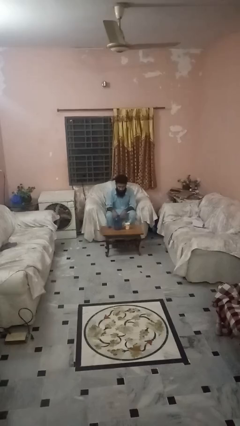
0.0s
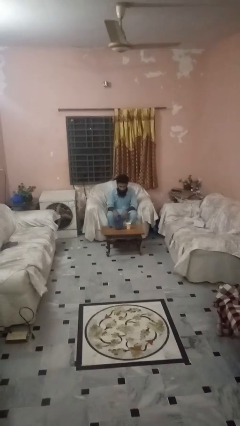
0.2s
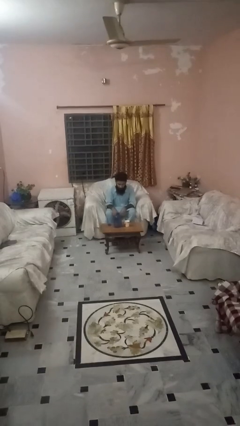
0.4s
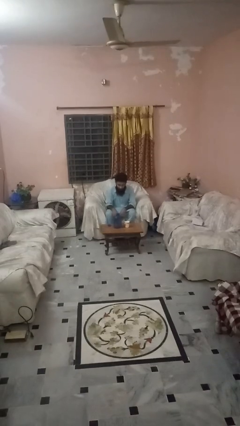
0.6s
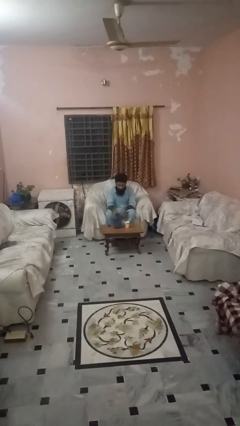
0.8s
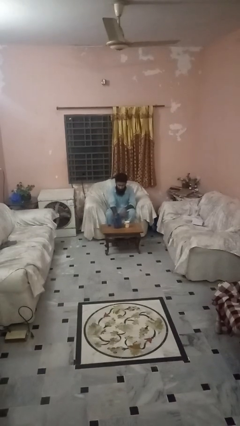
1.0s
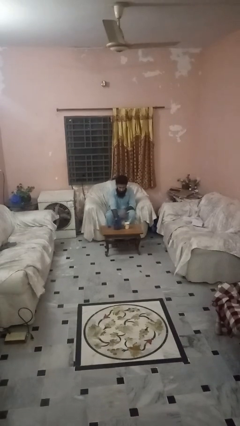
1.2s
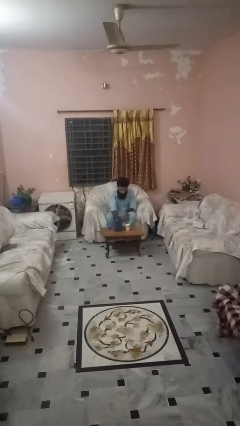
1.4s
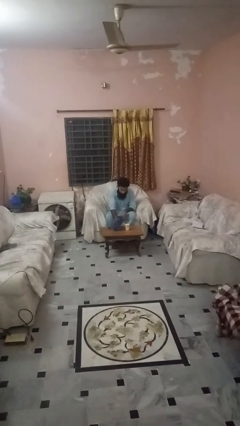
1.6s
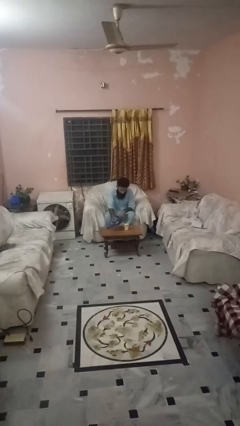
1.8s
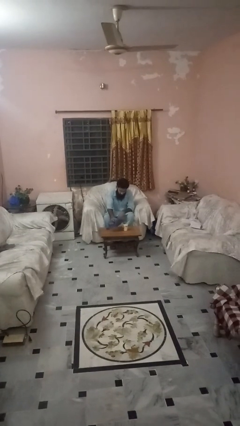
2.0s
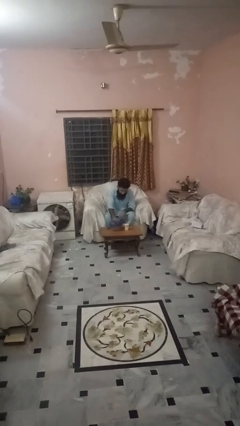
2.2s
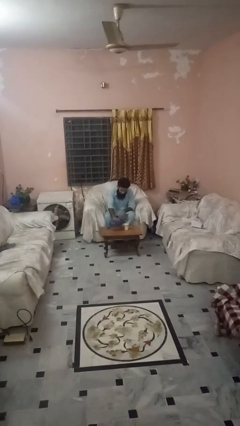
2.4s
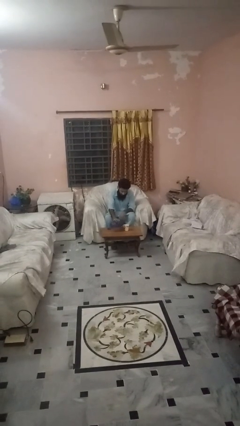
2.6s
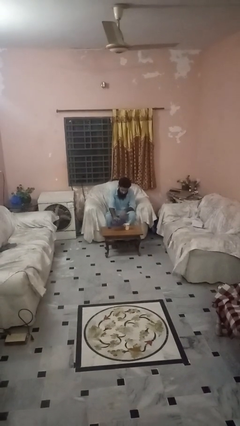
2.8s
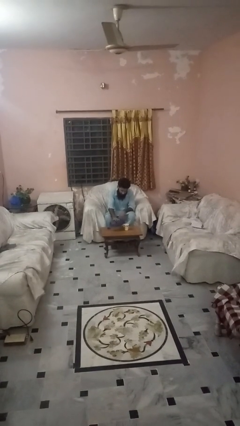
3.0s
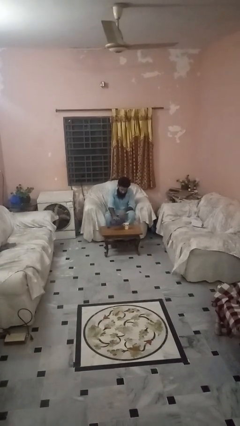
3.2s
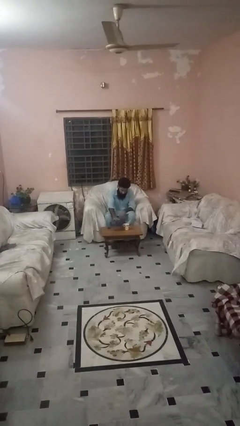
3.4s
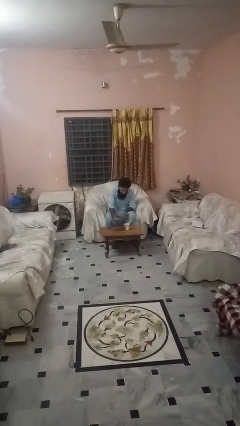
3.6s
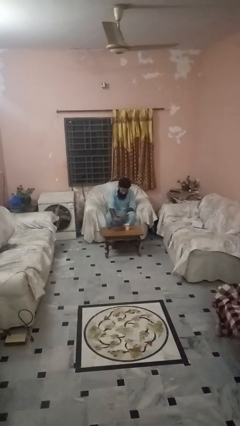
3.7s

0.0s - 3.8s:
person pours liquid into cup

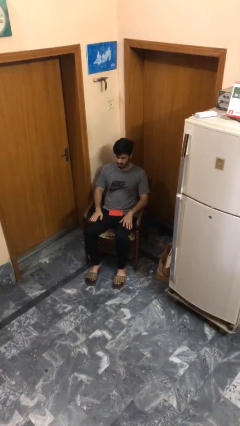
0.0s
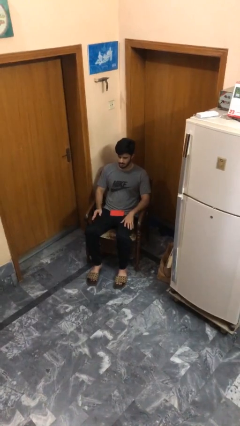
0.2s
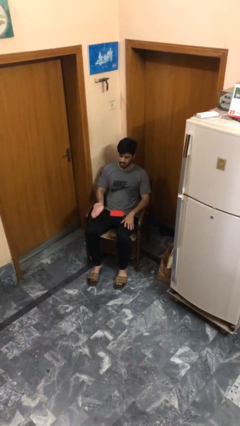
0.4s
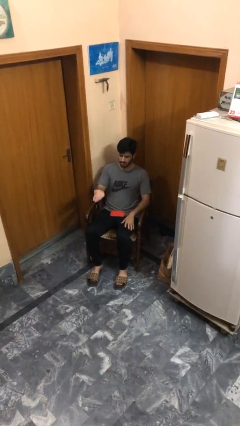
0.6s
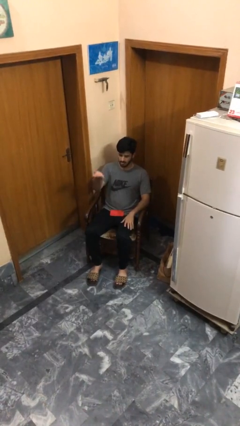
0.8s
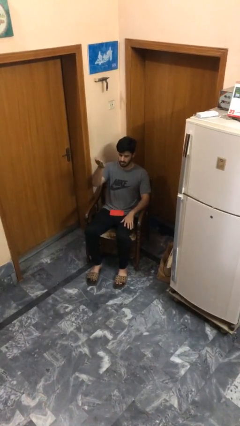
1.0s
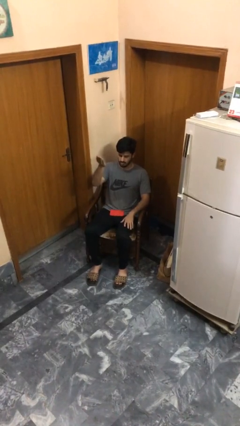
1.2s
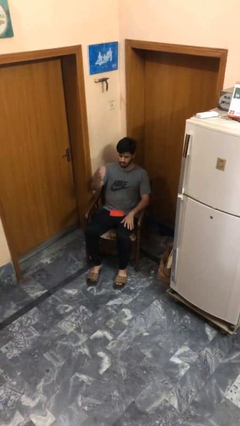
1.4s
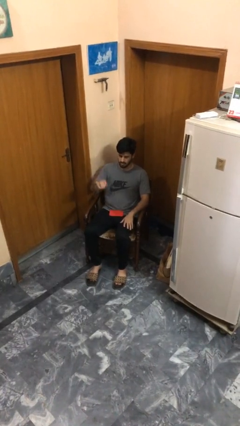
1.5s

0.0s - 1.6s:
person gestures swipe up

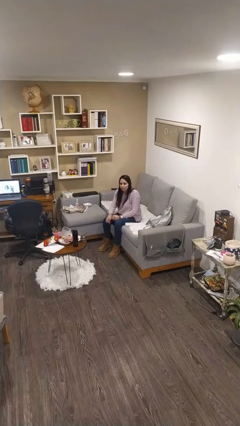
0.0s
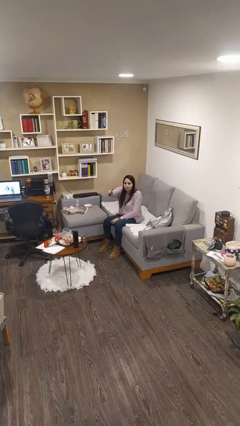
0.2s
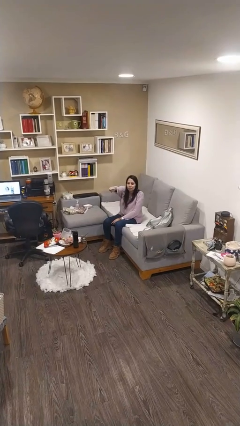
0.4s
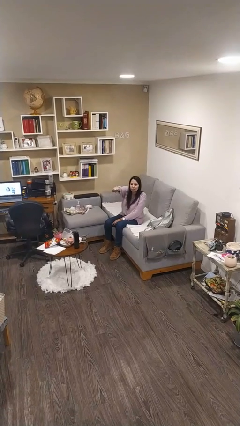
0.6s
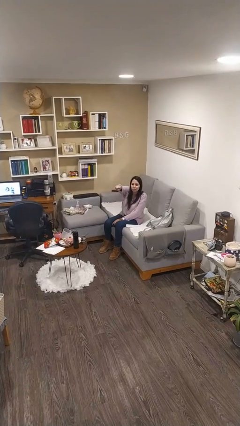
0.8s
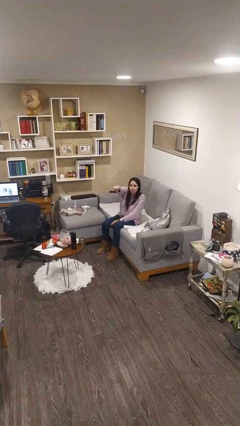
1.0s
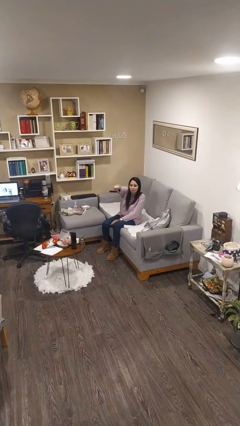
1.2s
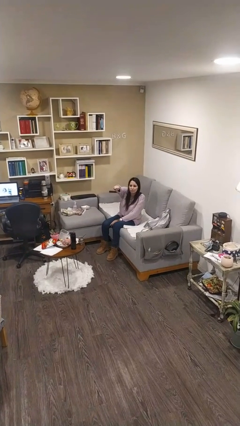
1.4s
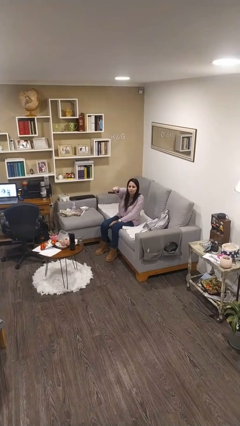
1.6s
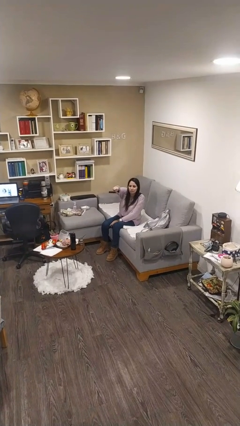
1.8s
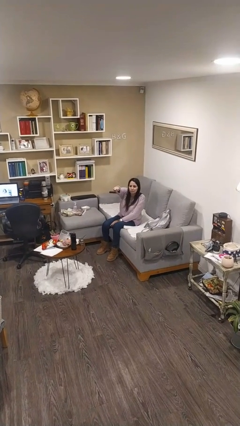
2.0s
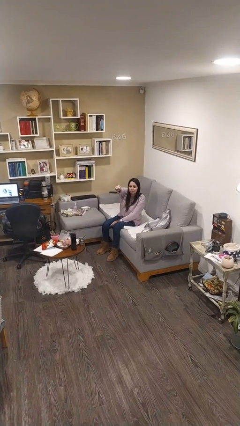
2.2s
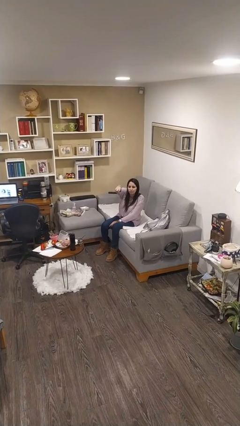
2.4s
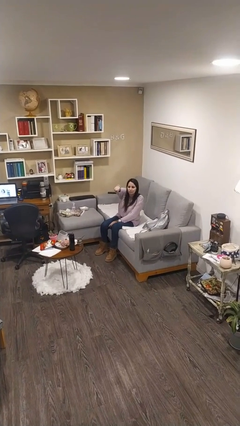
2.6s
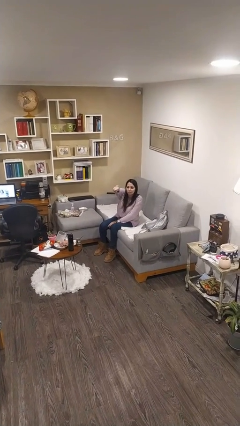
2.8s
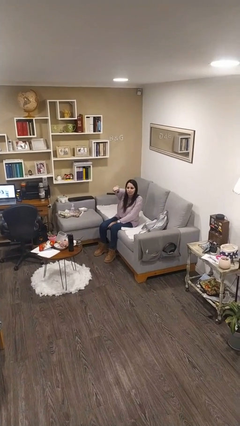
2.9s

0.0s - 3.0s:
person points at person

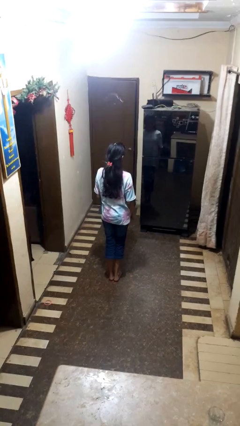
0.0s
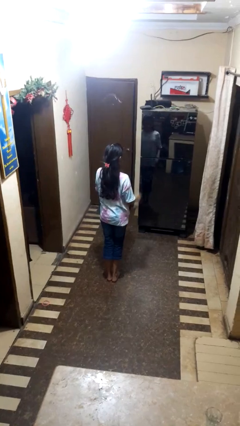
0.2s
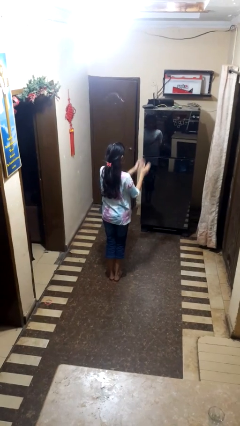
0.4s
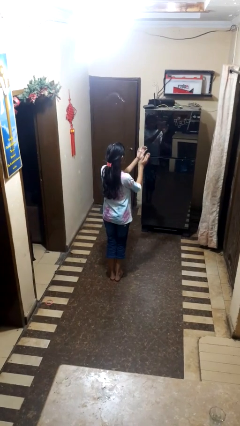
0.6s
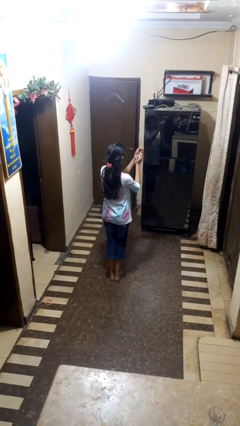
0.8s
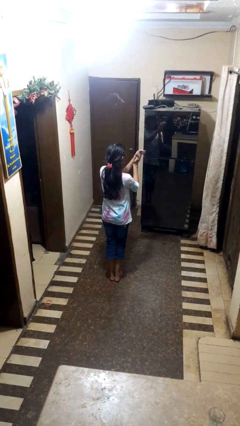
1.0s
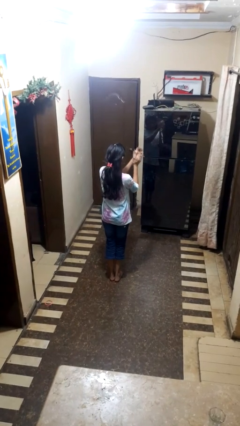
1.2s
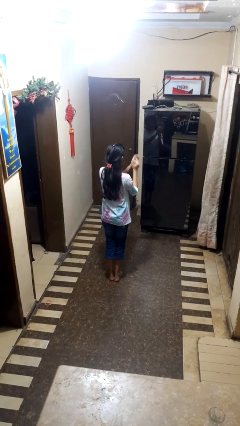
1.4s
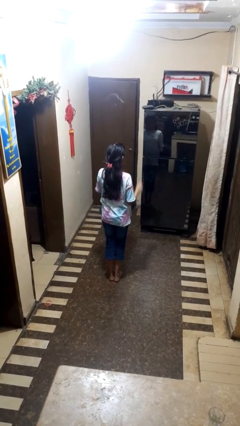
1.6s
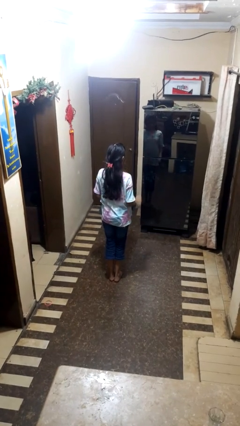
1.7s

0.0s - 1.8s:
person claps hands

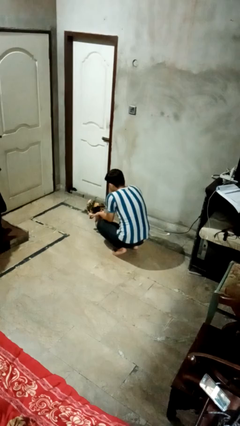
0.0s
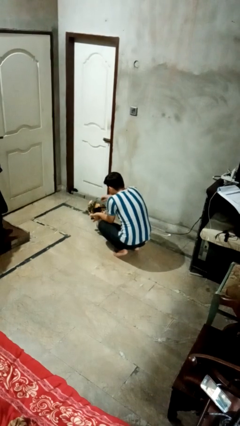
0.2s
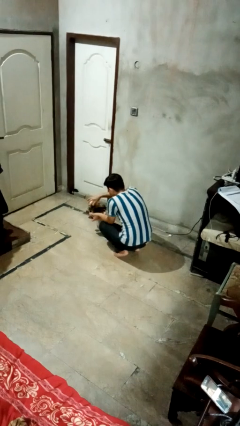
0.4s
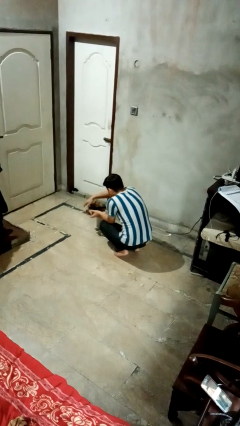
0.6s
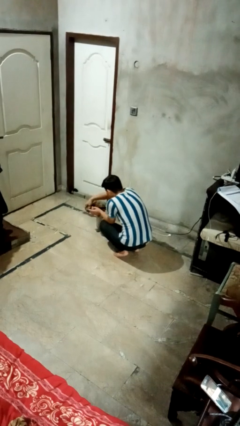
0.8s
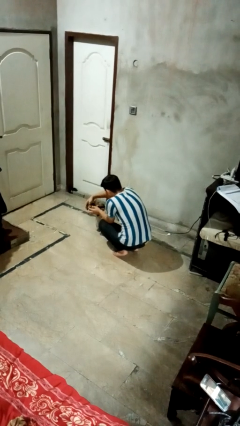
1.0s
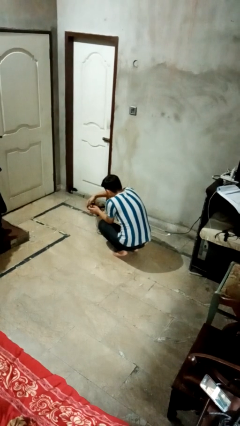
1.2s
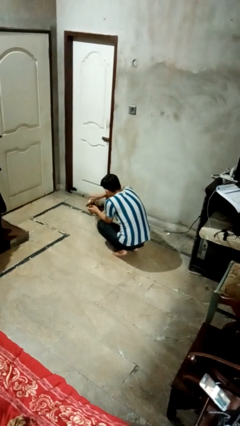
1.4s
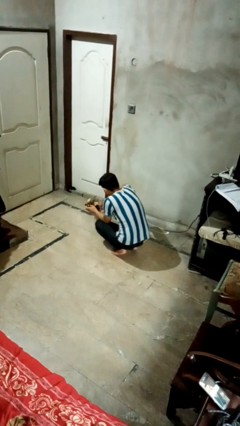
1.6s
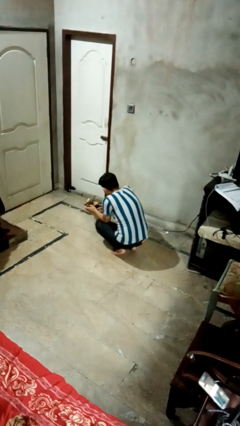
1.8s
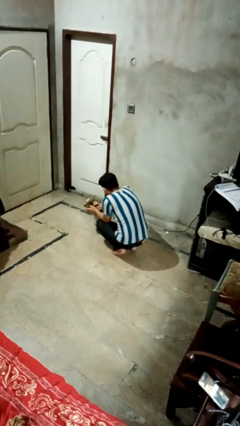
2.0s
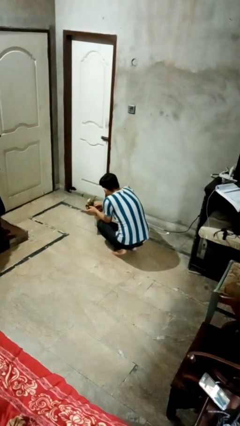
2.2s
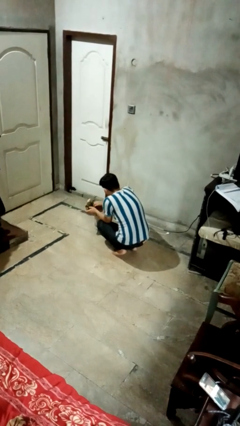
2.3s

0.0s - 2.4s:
person arranges flowers in vase

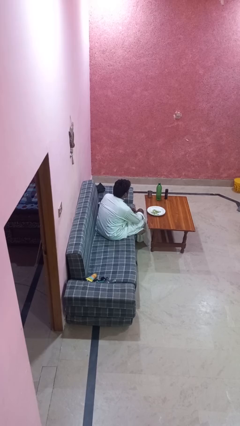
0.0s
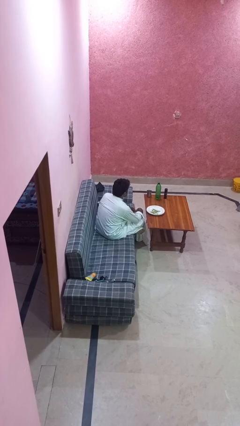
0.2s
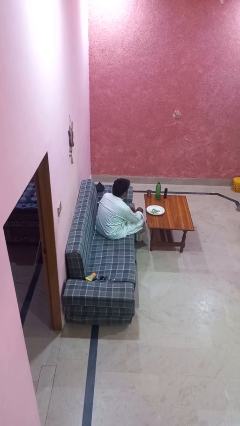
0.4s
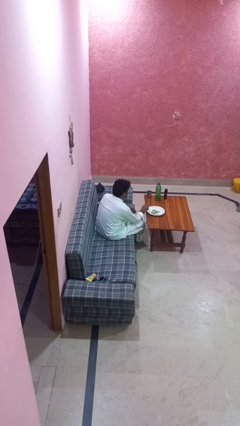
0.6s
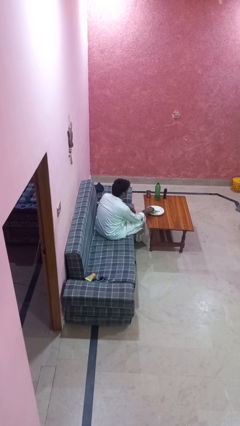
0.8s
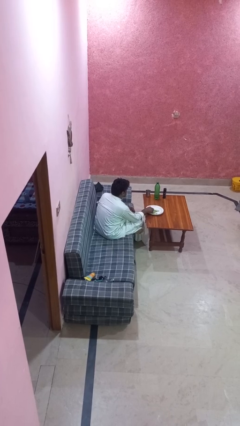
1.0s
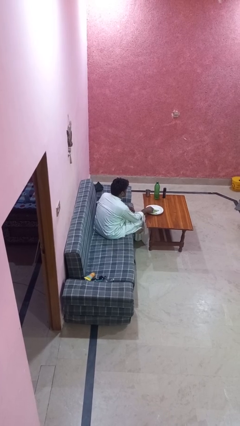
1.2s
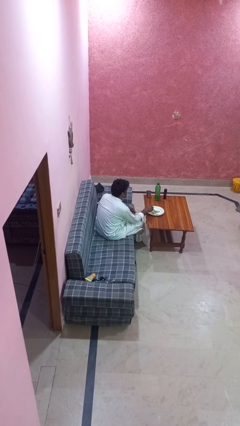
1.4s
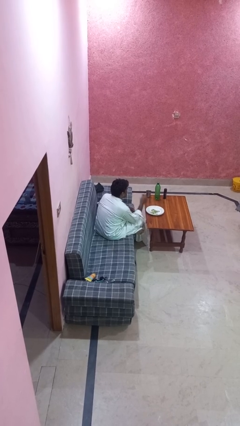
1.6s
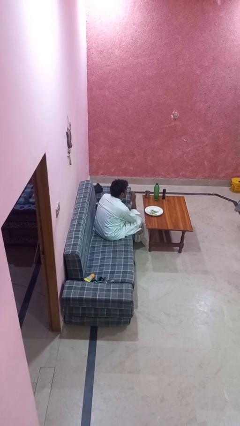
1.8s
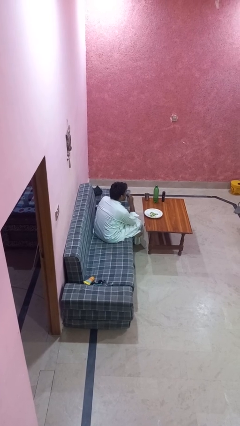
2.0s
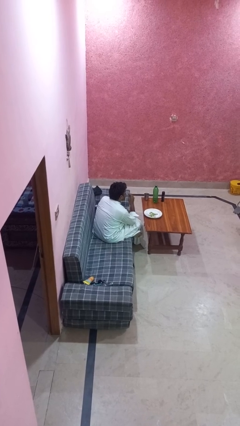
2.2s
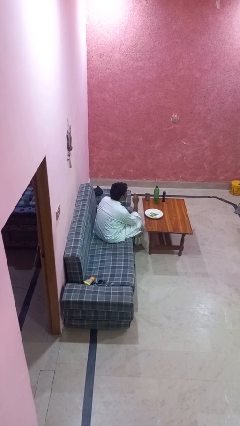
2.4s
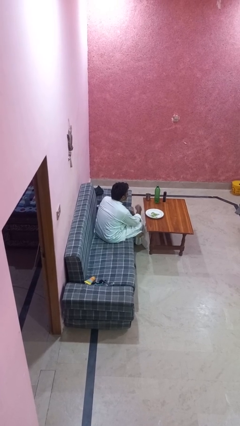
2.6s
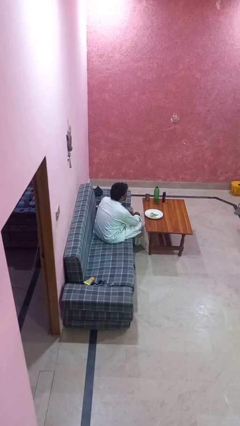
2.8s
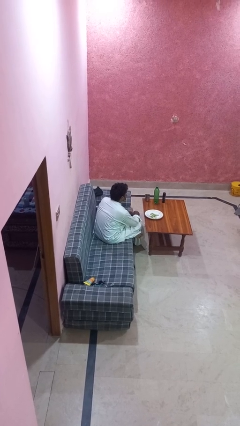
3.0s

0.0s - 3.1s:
person eats with hands

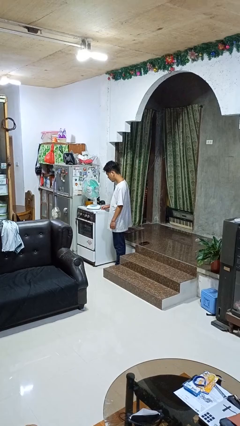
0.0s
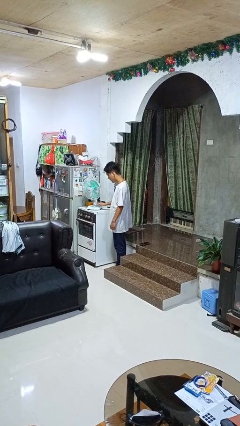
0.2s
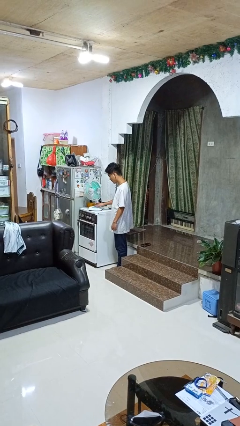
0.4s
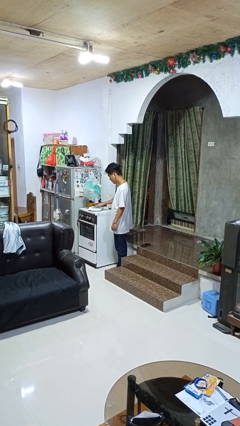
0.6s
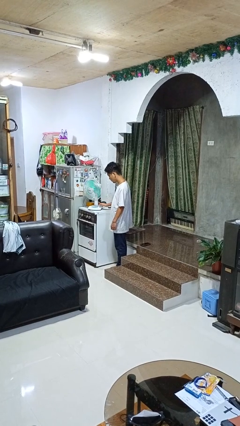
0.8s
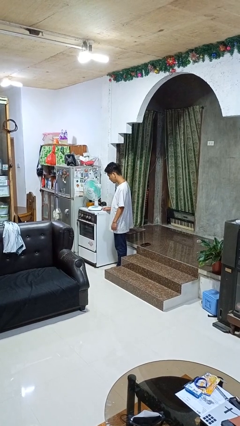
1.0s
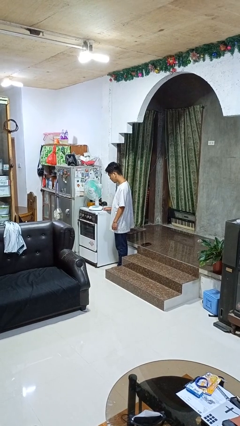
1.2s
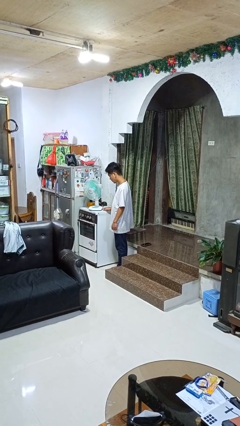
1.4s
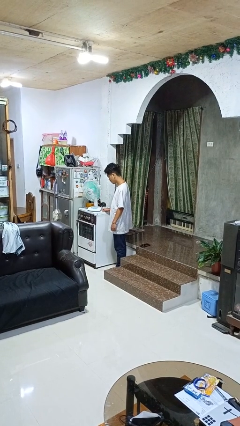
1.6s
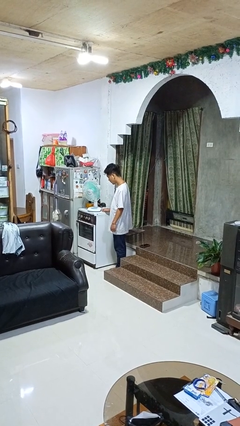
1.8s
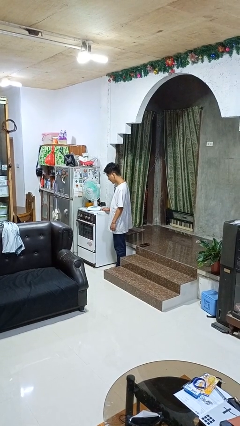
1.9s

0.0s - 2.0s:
person turns on fan
